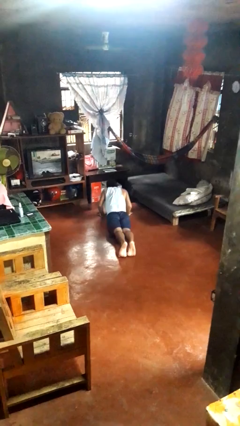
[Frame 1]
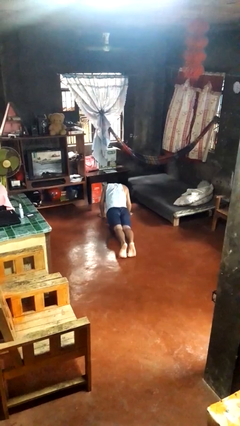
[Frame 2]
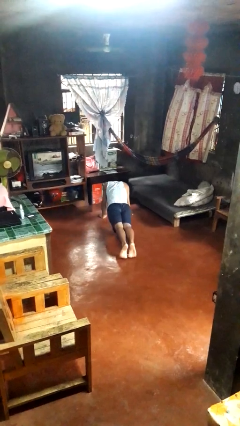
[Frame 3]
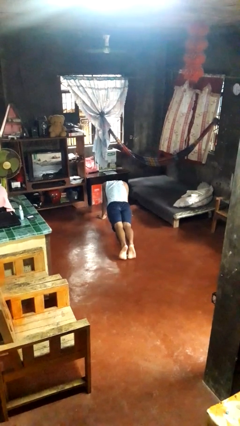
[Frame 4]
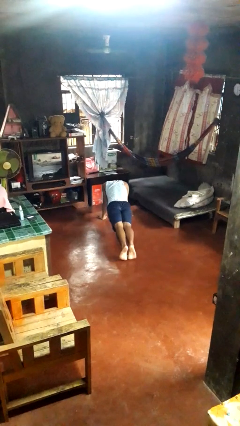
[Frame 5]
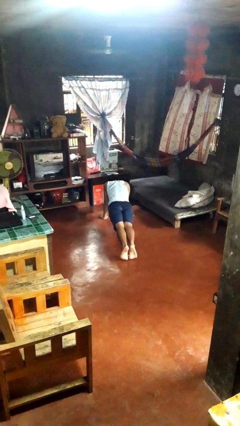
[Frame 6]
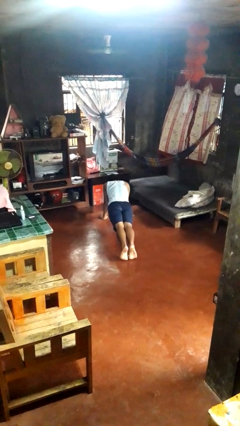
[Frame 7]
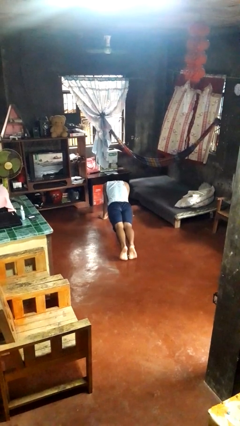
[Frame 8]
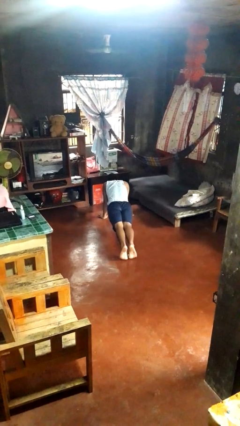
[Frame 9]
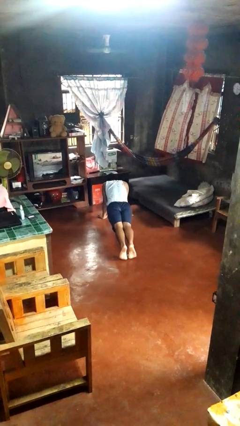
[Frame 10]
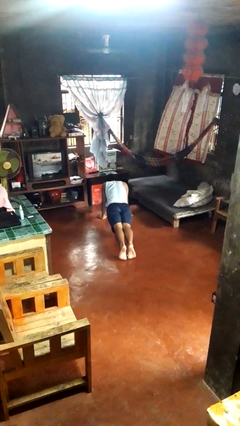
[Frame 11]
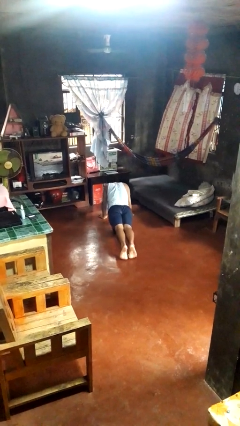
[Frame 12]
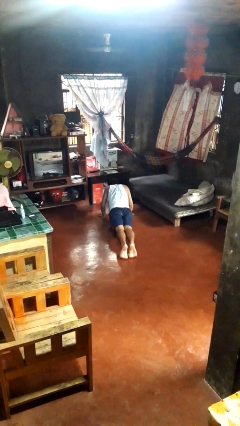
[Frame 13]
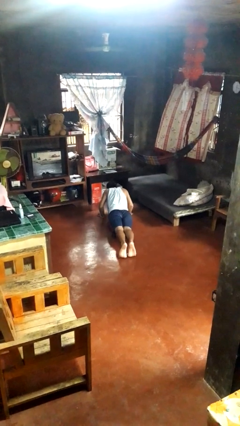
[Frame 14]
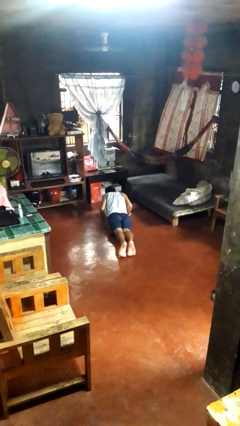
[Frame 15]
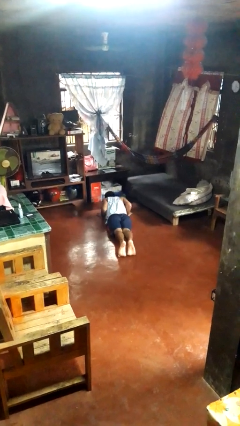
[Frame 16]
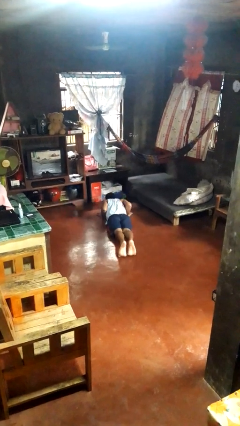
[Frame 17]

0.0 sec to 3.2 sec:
person exercises with pushup

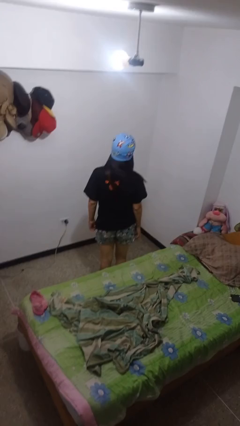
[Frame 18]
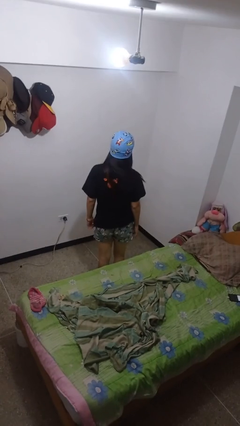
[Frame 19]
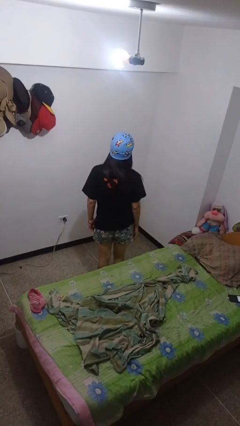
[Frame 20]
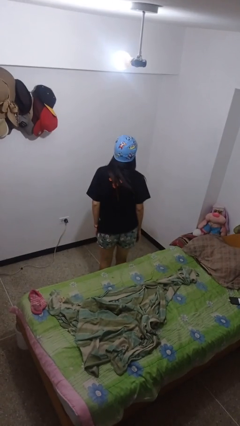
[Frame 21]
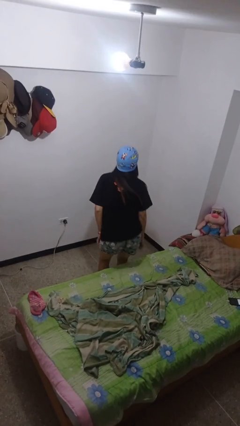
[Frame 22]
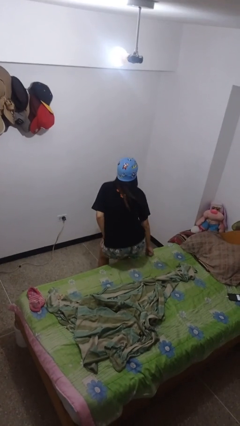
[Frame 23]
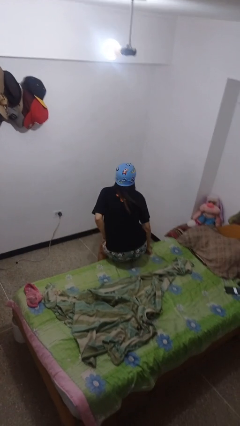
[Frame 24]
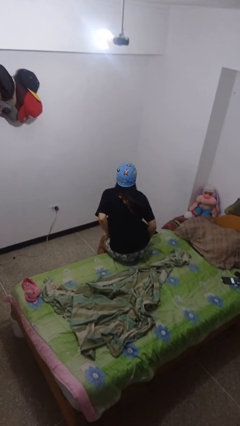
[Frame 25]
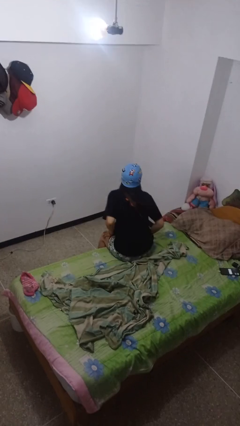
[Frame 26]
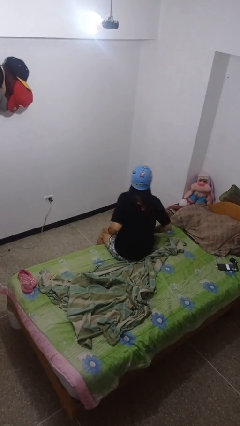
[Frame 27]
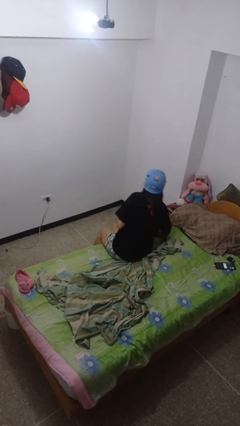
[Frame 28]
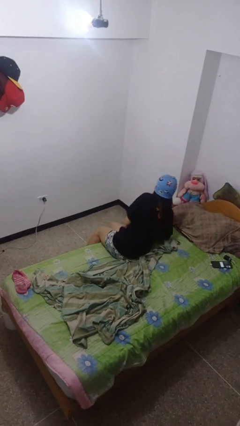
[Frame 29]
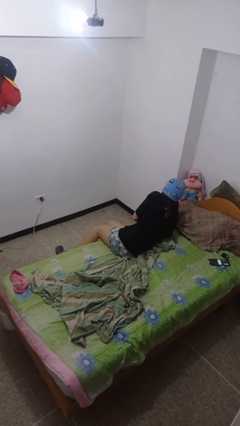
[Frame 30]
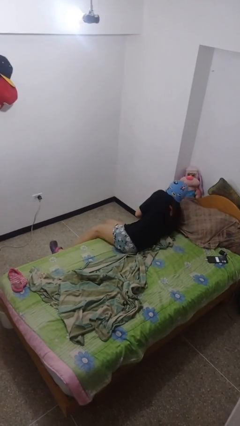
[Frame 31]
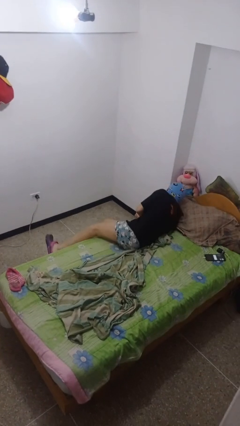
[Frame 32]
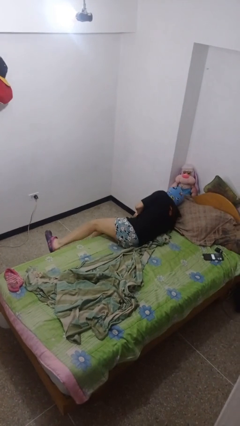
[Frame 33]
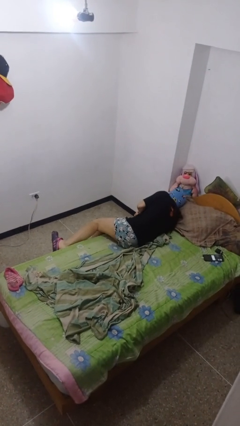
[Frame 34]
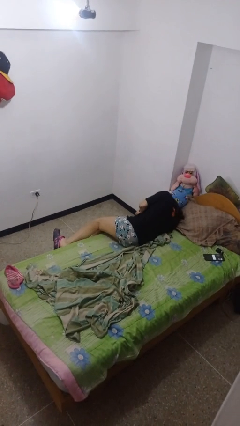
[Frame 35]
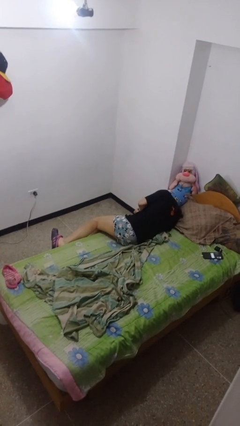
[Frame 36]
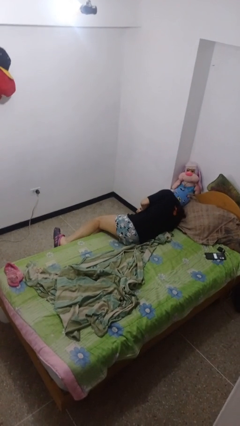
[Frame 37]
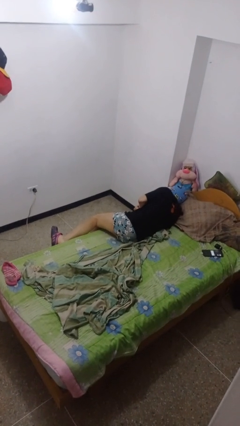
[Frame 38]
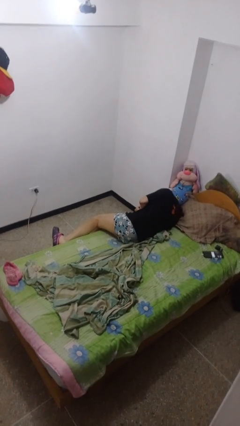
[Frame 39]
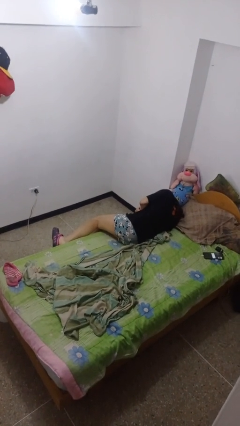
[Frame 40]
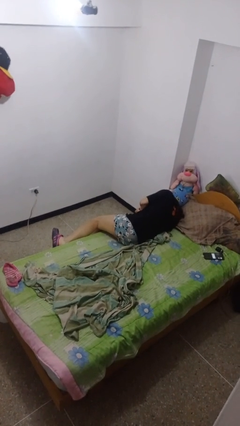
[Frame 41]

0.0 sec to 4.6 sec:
person lies down on bed

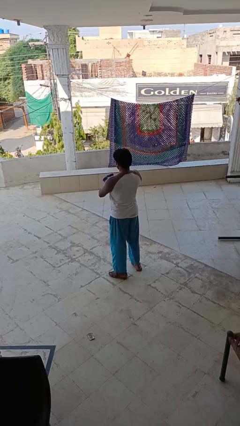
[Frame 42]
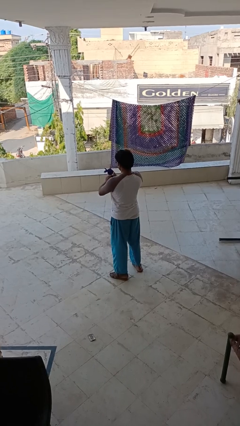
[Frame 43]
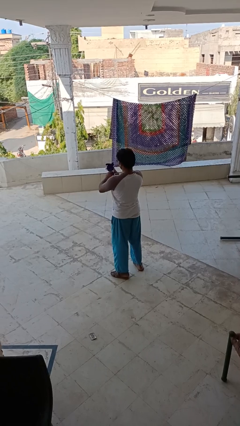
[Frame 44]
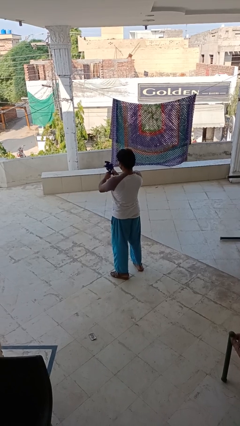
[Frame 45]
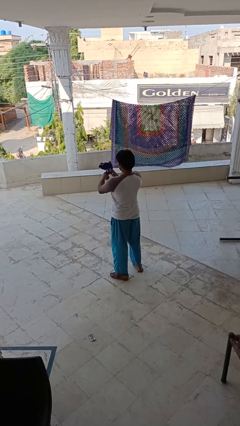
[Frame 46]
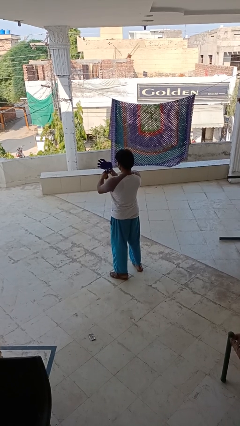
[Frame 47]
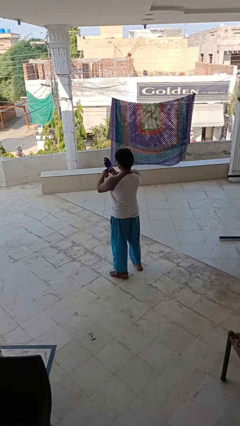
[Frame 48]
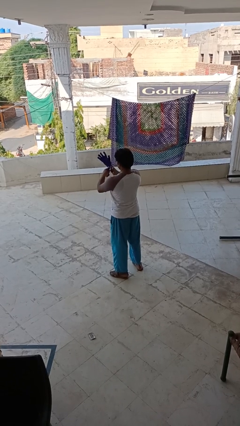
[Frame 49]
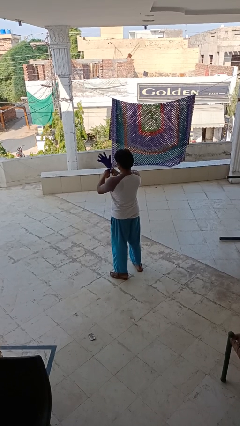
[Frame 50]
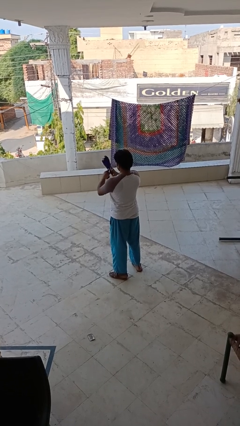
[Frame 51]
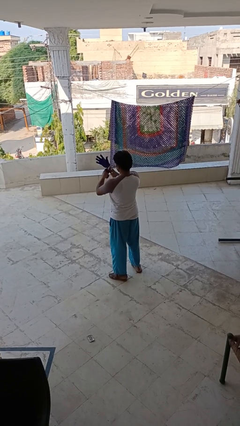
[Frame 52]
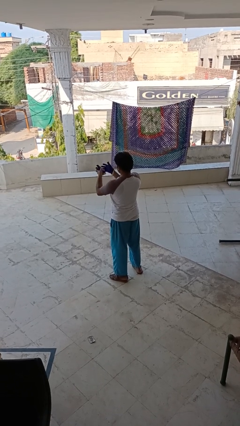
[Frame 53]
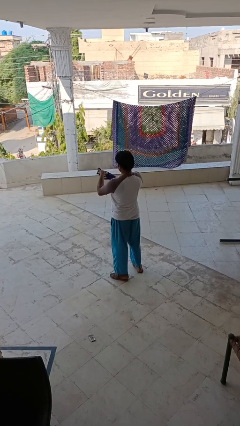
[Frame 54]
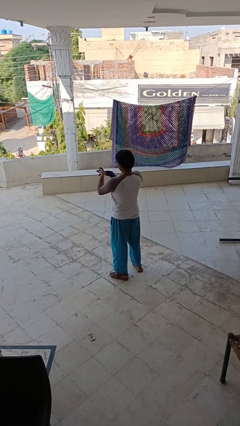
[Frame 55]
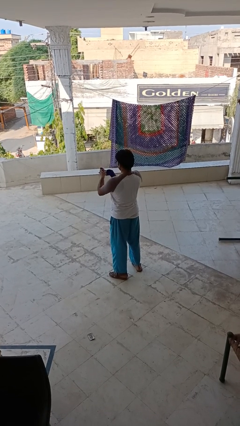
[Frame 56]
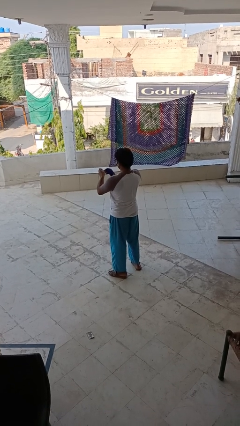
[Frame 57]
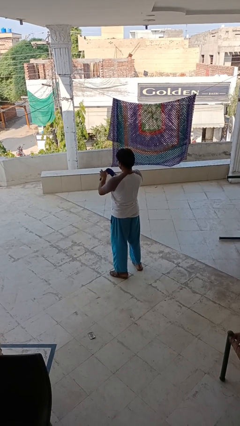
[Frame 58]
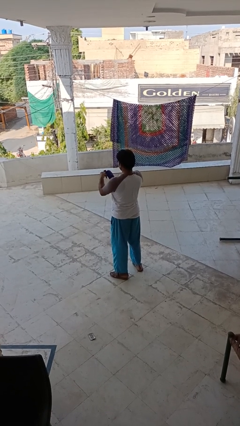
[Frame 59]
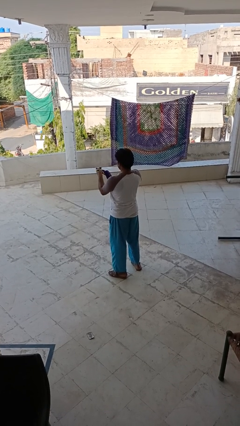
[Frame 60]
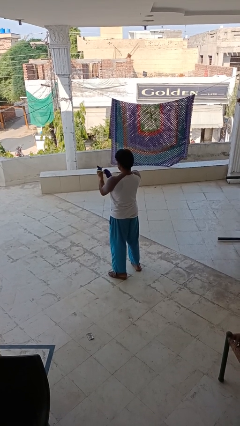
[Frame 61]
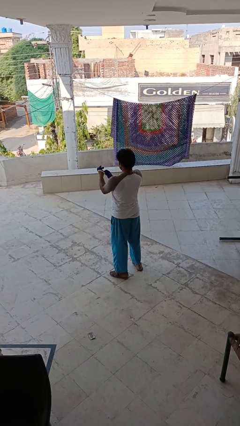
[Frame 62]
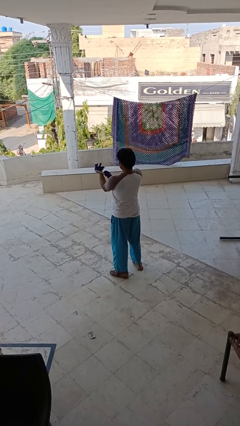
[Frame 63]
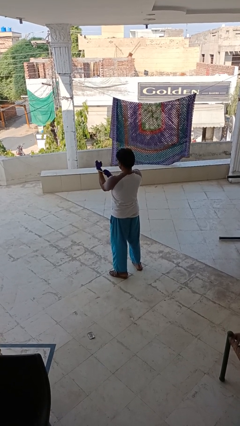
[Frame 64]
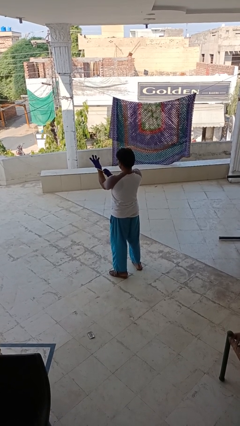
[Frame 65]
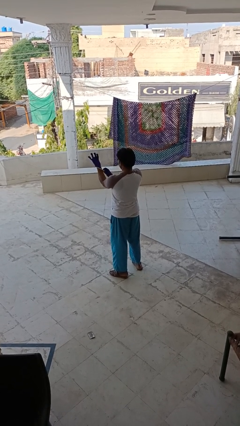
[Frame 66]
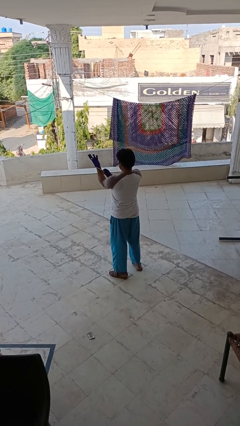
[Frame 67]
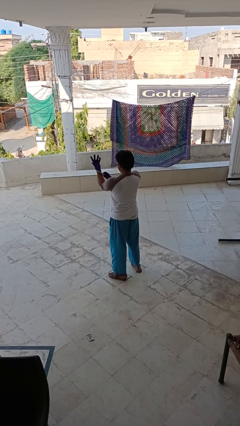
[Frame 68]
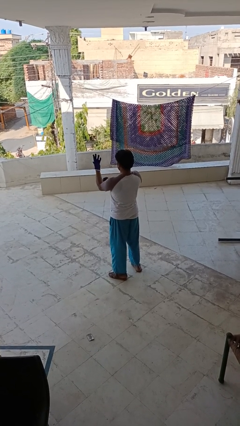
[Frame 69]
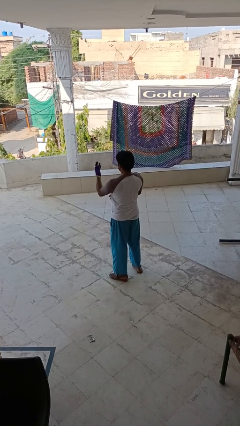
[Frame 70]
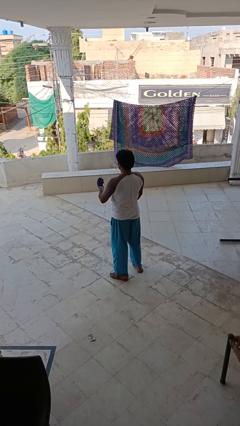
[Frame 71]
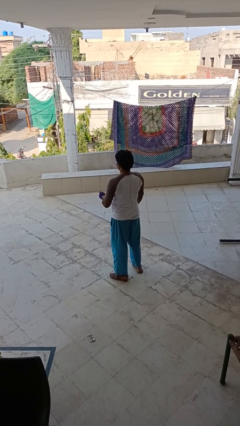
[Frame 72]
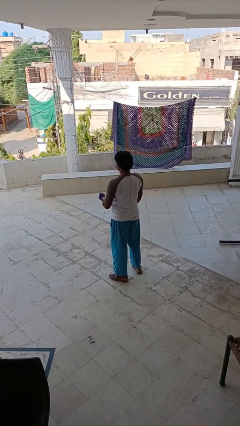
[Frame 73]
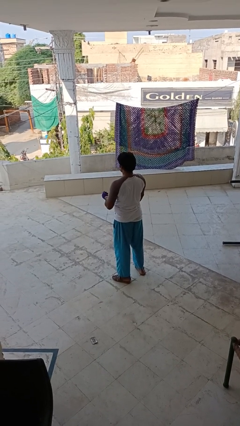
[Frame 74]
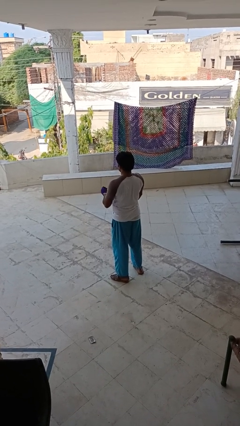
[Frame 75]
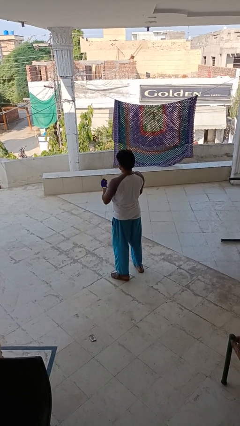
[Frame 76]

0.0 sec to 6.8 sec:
person puts on gloves

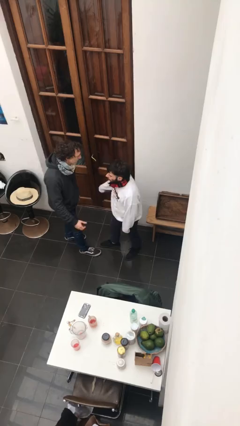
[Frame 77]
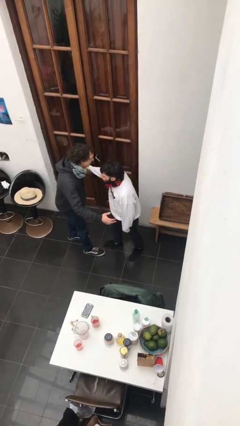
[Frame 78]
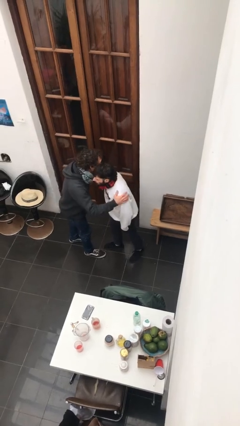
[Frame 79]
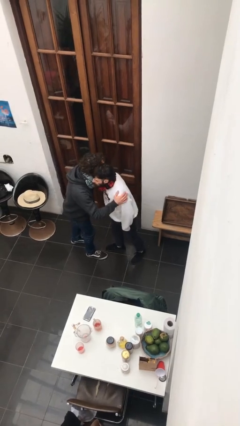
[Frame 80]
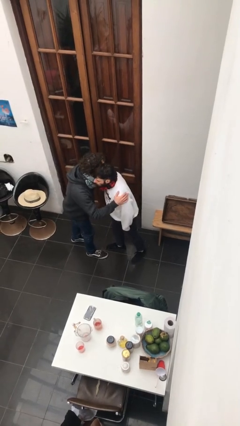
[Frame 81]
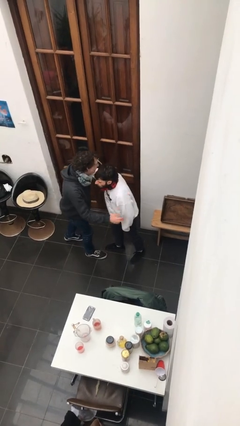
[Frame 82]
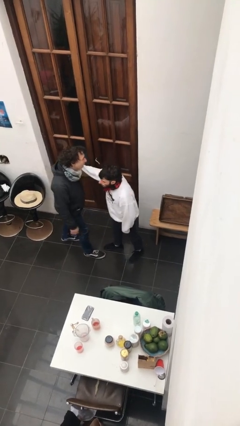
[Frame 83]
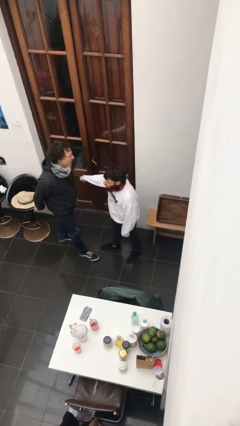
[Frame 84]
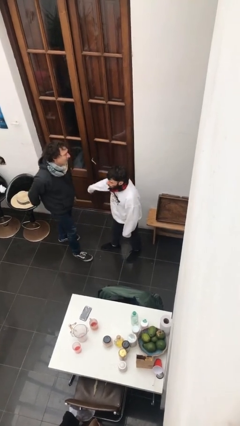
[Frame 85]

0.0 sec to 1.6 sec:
person kisses cheek of person

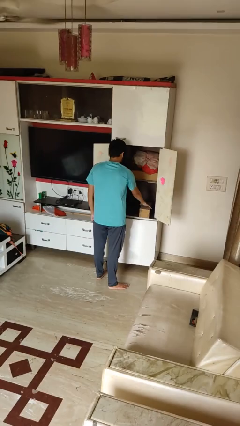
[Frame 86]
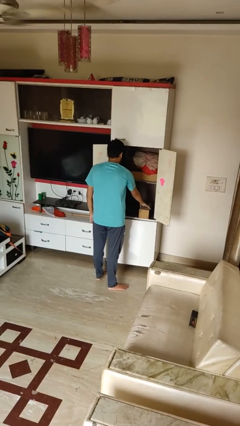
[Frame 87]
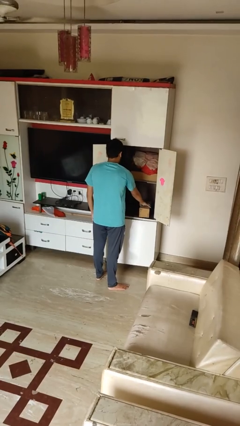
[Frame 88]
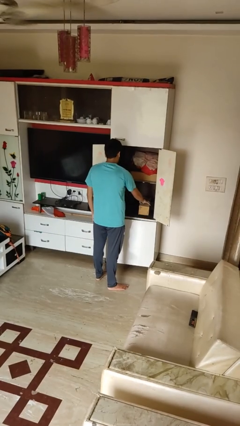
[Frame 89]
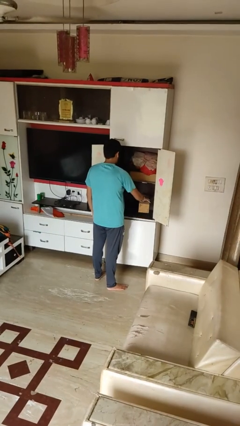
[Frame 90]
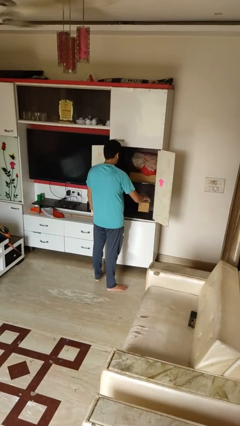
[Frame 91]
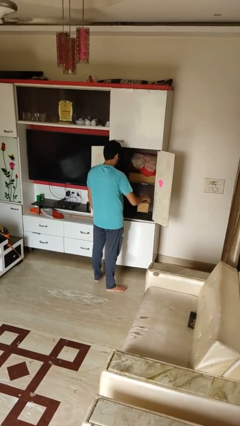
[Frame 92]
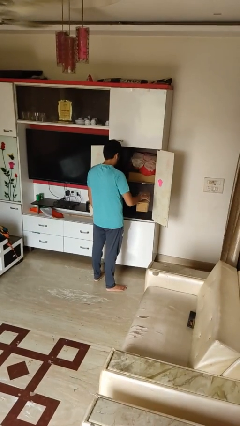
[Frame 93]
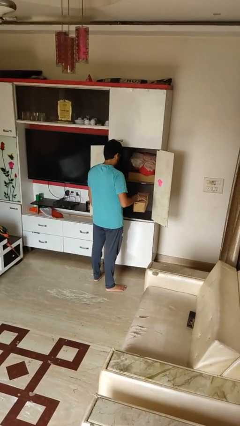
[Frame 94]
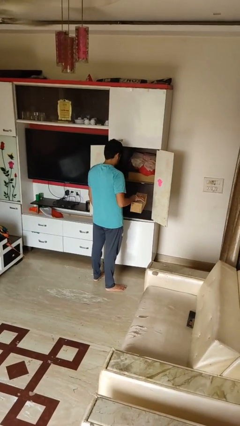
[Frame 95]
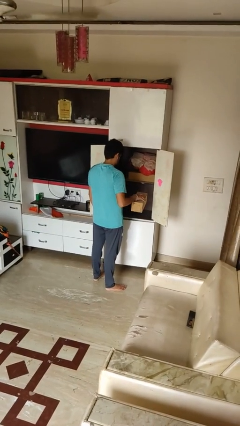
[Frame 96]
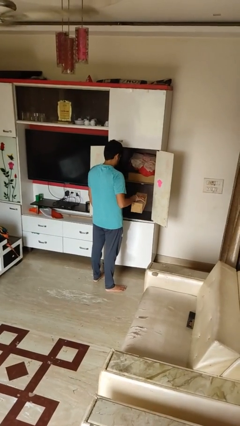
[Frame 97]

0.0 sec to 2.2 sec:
person picks up object from cabinet
